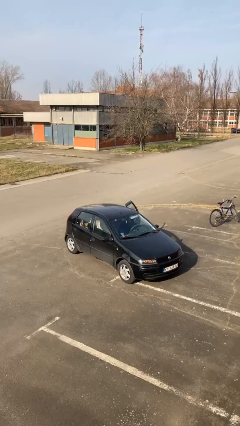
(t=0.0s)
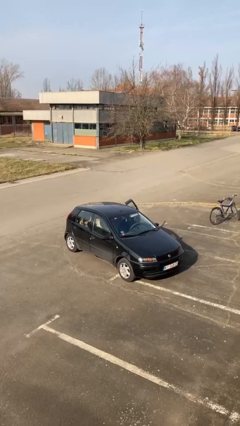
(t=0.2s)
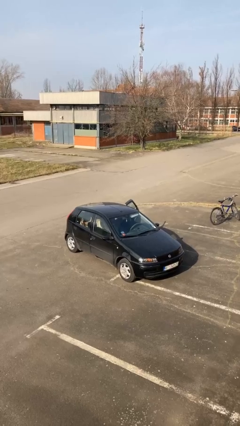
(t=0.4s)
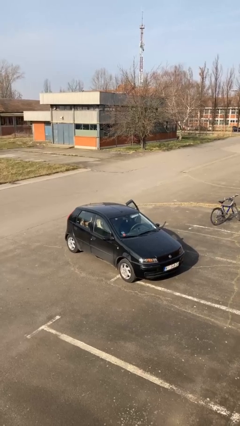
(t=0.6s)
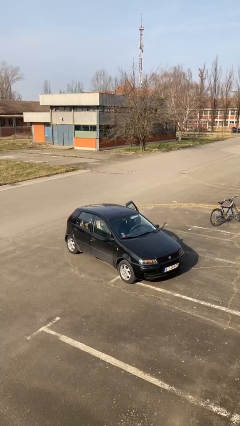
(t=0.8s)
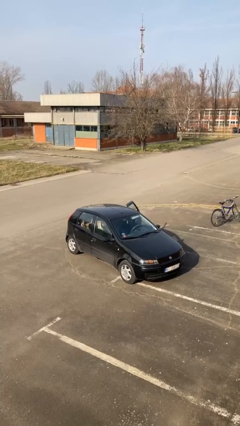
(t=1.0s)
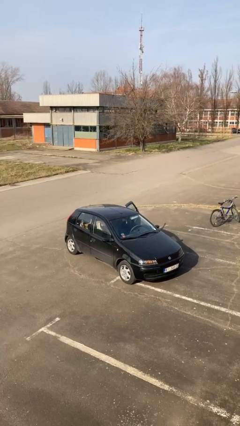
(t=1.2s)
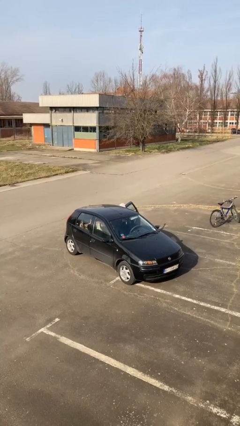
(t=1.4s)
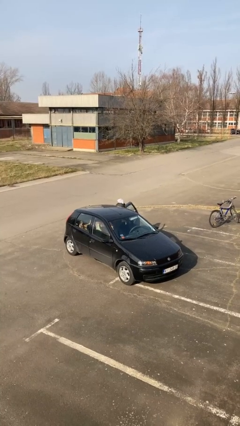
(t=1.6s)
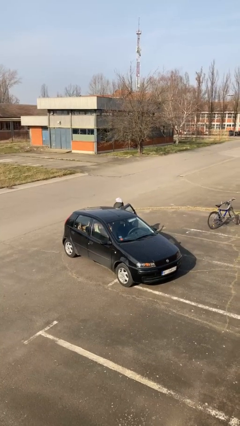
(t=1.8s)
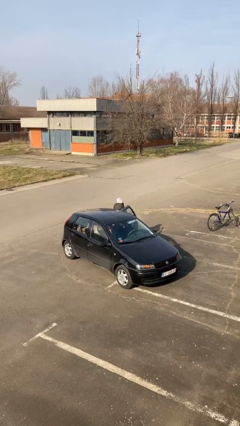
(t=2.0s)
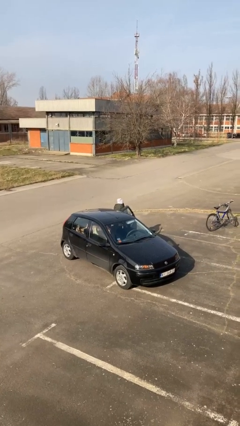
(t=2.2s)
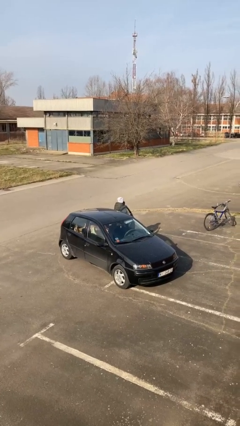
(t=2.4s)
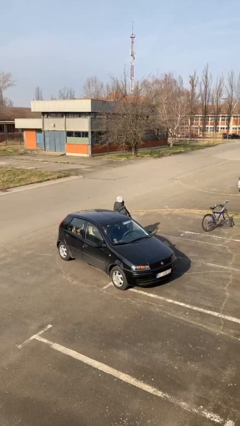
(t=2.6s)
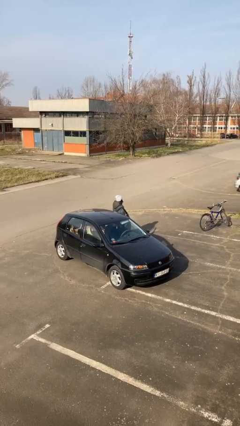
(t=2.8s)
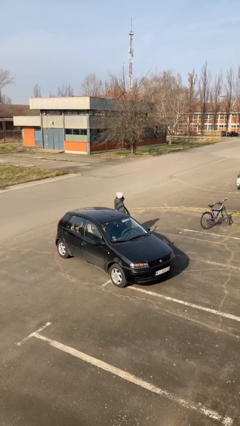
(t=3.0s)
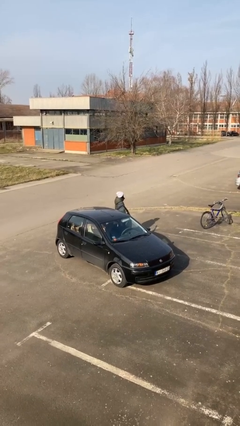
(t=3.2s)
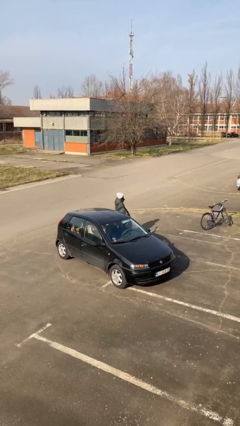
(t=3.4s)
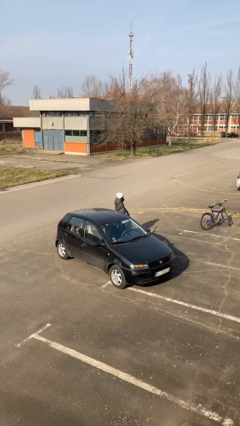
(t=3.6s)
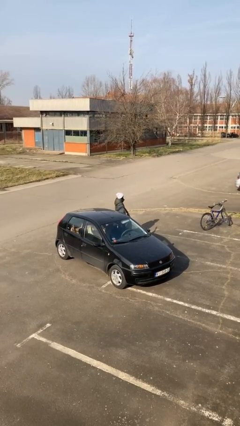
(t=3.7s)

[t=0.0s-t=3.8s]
person exits car

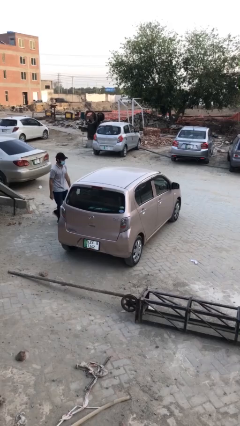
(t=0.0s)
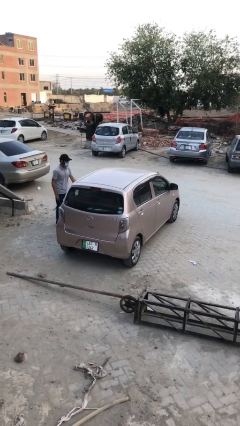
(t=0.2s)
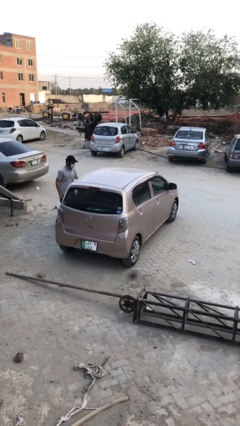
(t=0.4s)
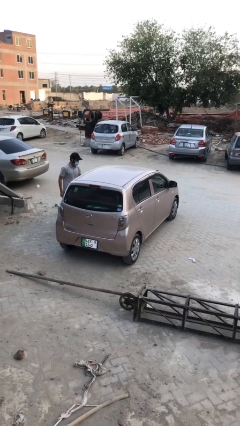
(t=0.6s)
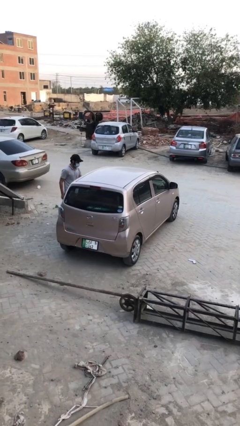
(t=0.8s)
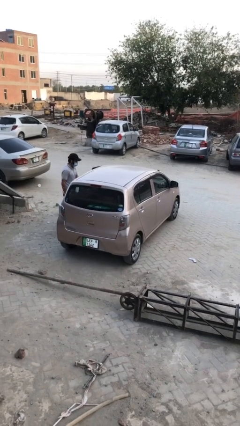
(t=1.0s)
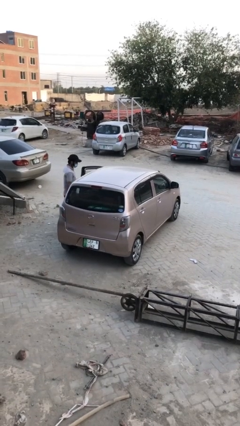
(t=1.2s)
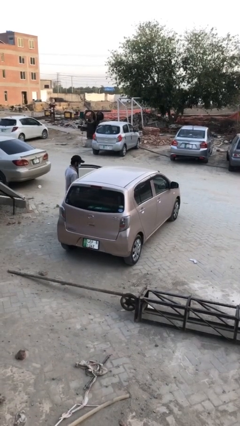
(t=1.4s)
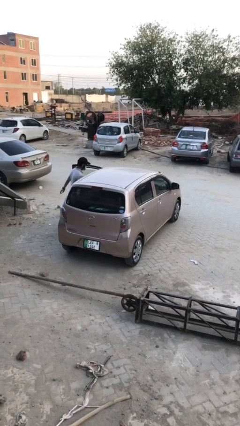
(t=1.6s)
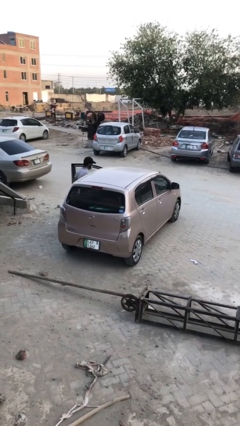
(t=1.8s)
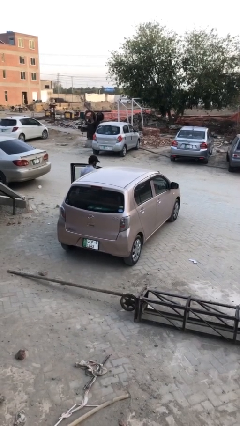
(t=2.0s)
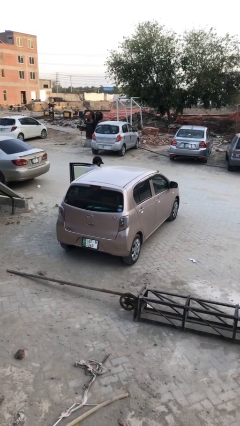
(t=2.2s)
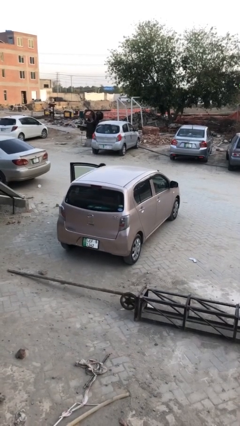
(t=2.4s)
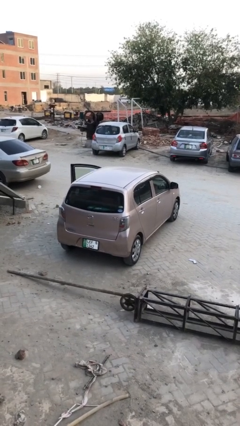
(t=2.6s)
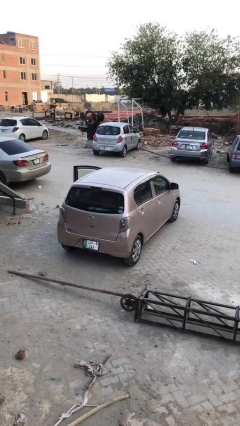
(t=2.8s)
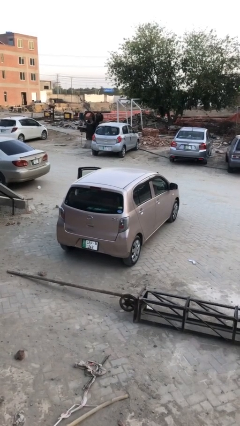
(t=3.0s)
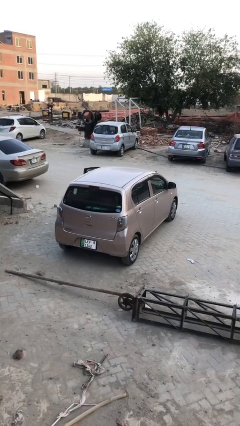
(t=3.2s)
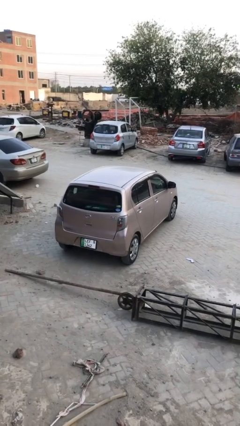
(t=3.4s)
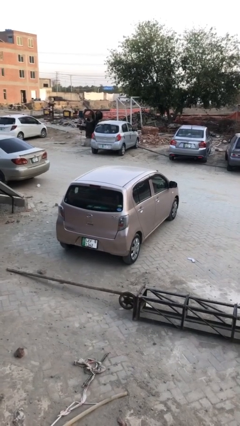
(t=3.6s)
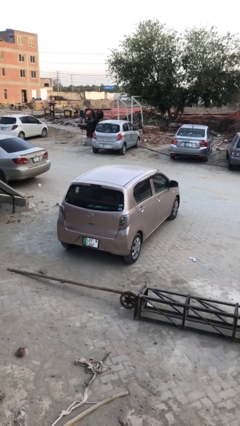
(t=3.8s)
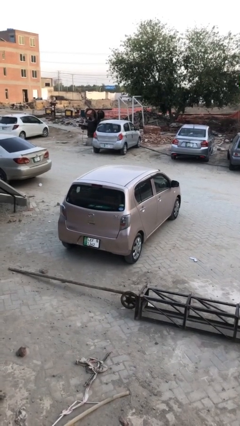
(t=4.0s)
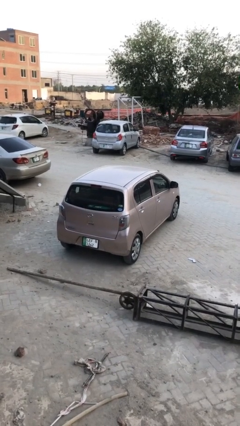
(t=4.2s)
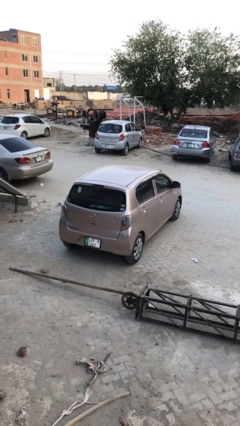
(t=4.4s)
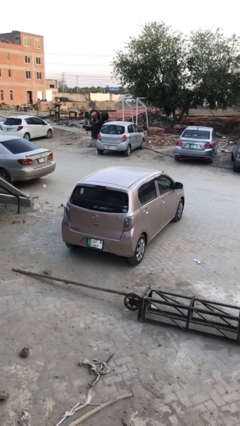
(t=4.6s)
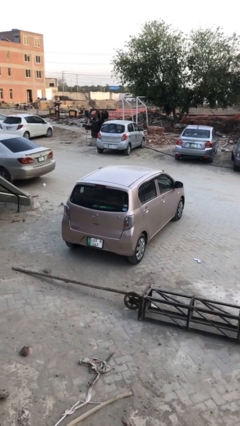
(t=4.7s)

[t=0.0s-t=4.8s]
car picks up person

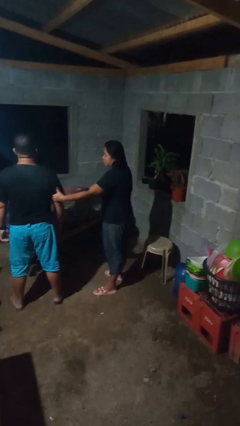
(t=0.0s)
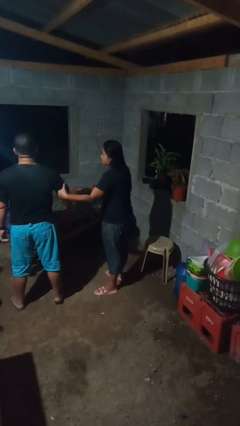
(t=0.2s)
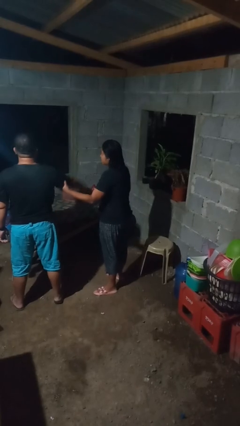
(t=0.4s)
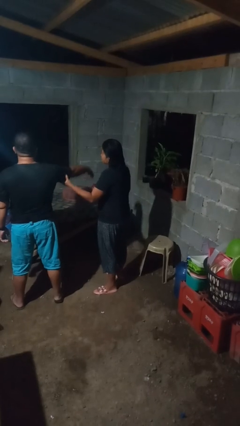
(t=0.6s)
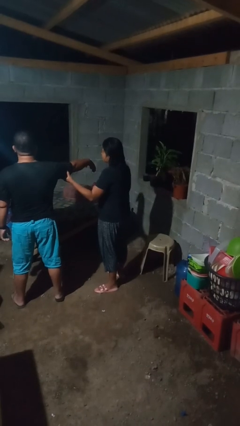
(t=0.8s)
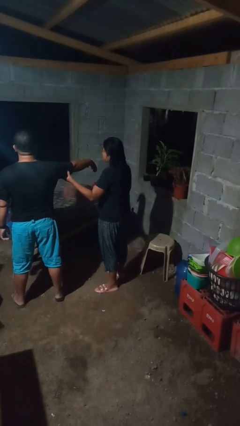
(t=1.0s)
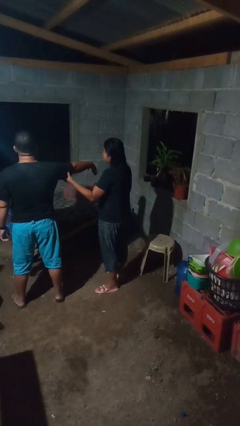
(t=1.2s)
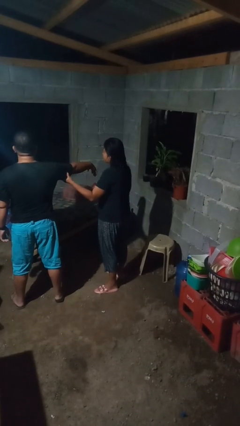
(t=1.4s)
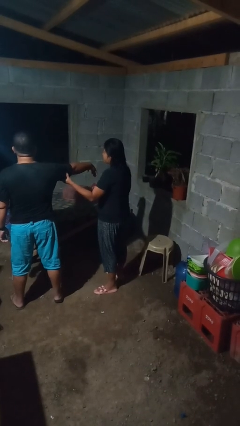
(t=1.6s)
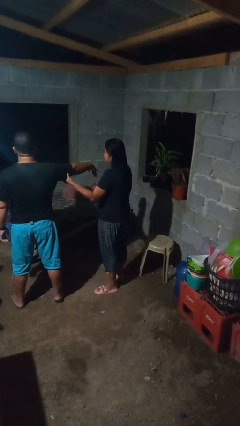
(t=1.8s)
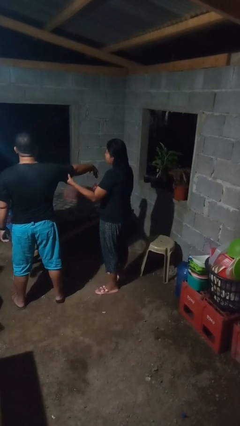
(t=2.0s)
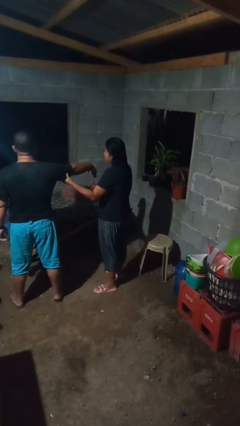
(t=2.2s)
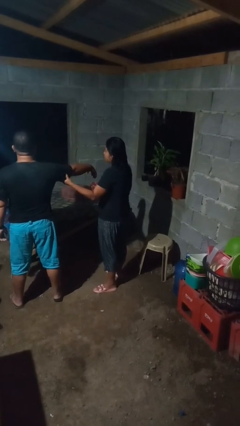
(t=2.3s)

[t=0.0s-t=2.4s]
person grabs person by bicep

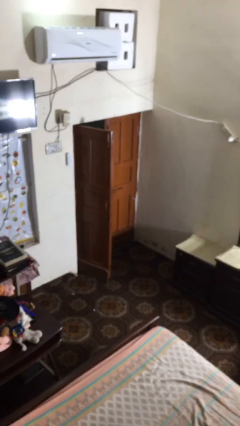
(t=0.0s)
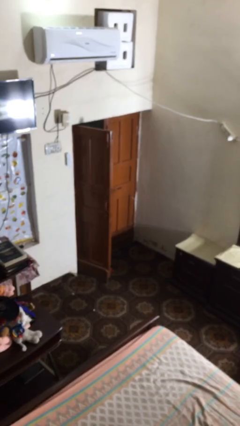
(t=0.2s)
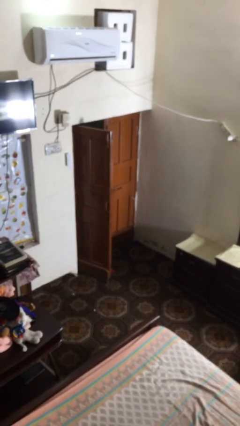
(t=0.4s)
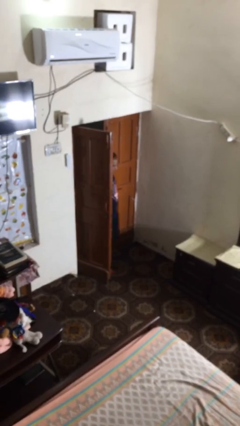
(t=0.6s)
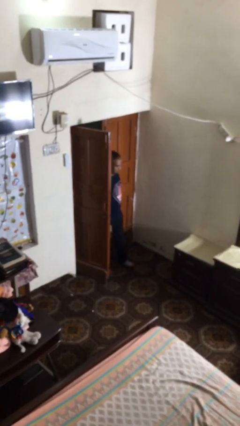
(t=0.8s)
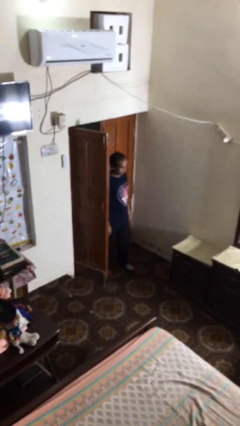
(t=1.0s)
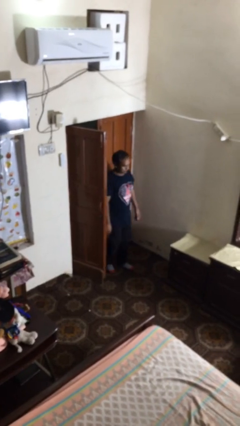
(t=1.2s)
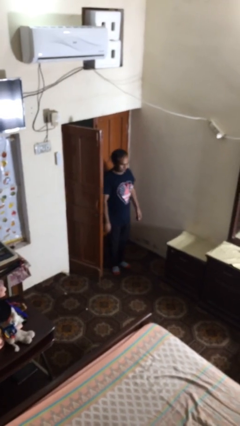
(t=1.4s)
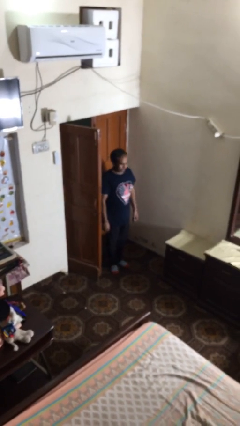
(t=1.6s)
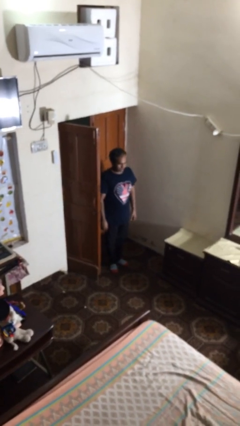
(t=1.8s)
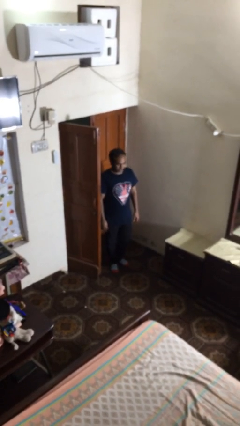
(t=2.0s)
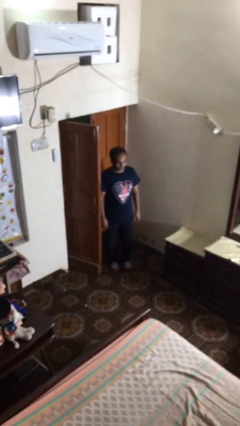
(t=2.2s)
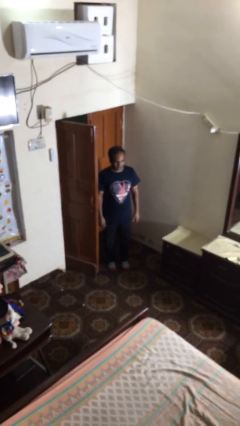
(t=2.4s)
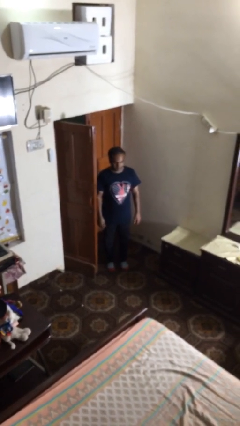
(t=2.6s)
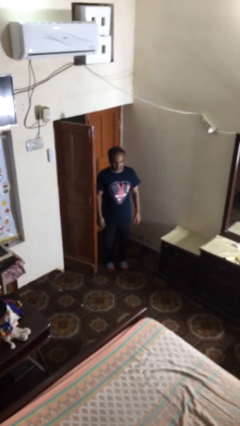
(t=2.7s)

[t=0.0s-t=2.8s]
person enters scene through structure

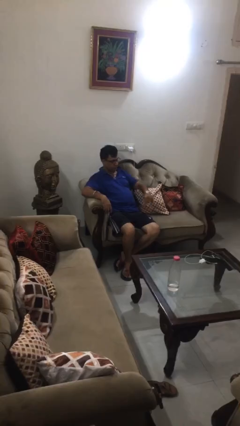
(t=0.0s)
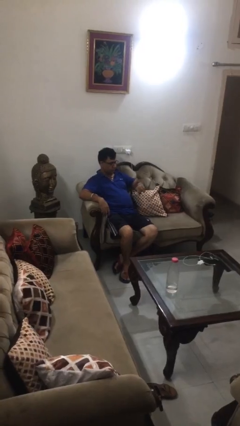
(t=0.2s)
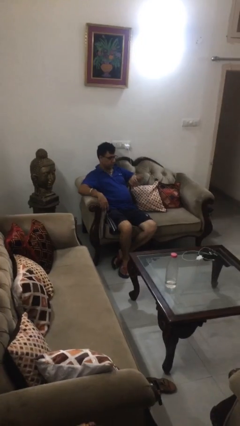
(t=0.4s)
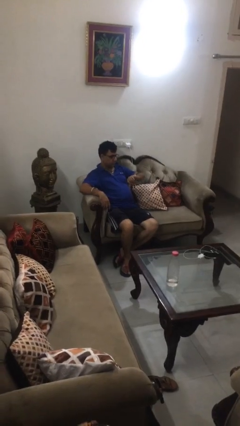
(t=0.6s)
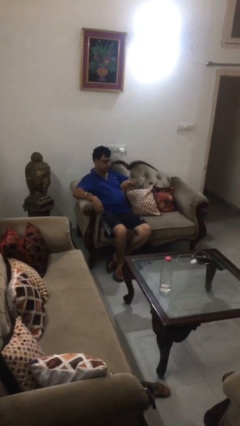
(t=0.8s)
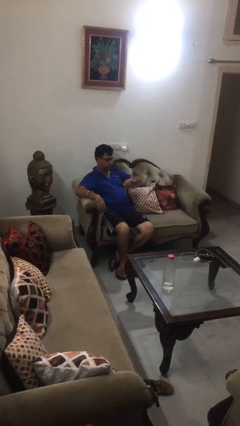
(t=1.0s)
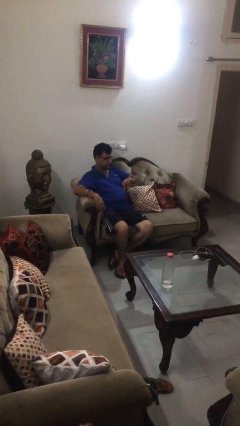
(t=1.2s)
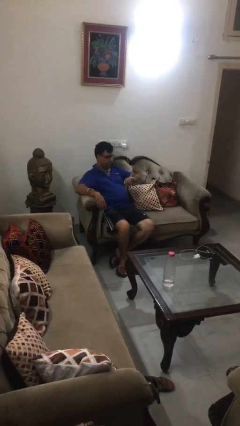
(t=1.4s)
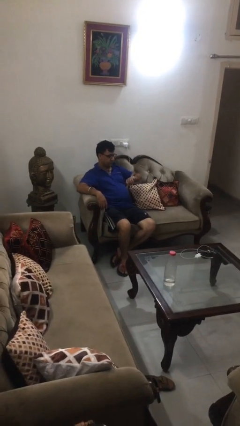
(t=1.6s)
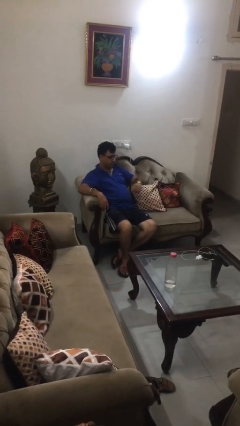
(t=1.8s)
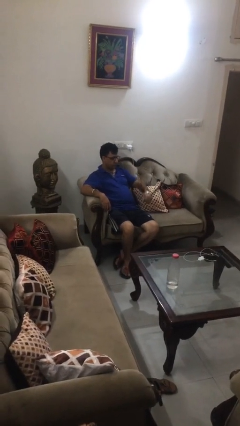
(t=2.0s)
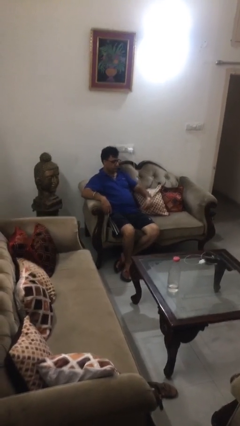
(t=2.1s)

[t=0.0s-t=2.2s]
person looks at wristwatch

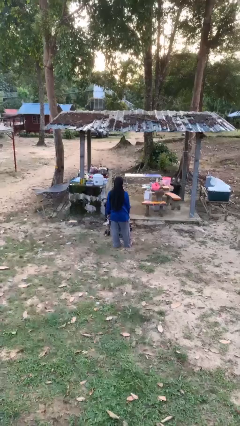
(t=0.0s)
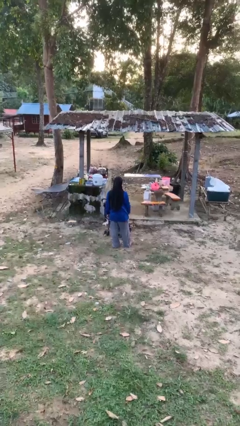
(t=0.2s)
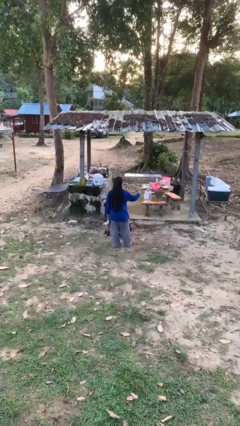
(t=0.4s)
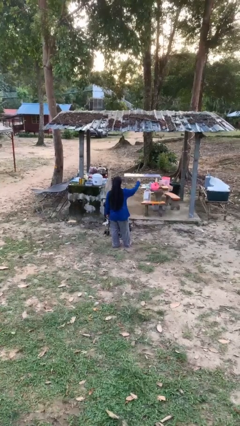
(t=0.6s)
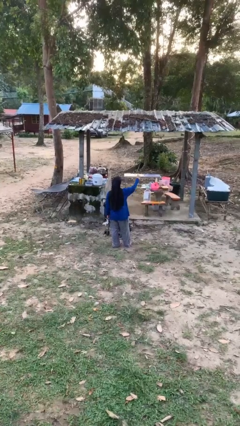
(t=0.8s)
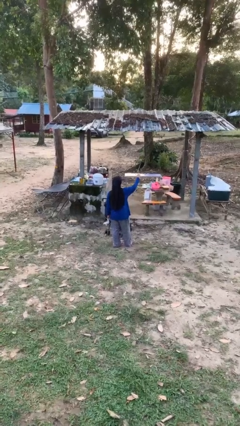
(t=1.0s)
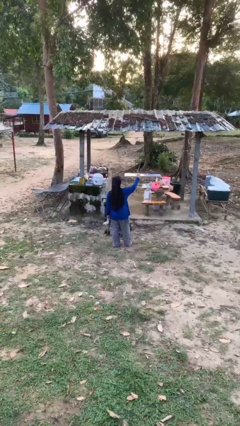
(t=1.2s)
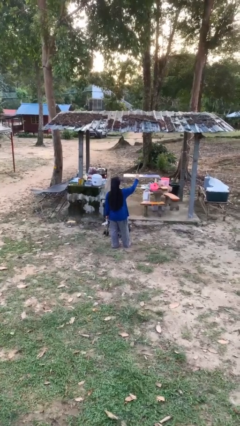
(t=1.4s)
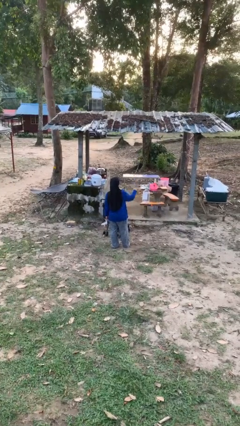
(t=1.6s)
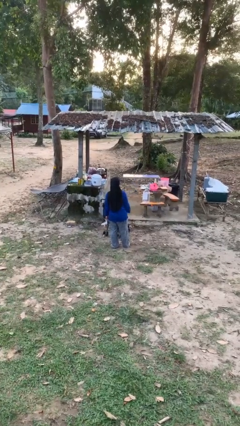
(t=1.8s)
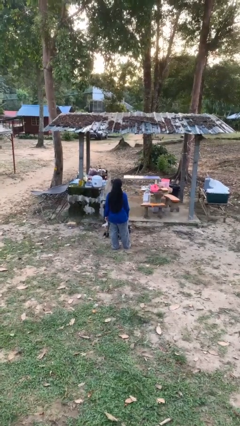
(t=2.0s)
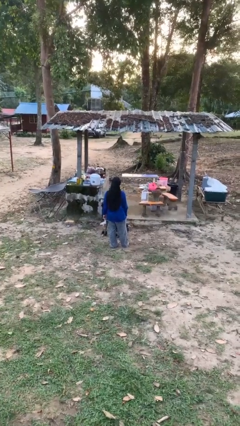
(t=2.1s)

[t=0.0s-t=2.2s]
person gestures number one
